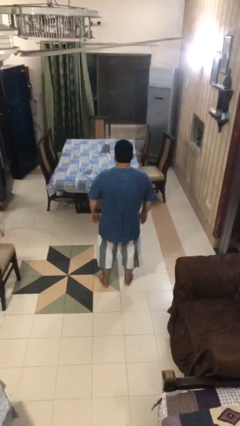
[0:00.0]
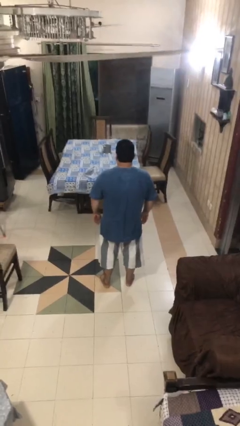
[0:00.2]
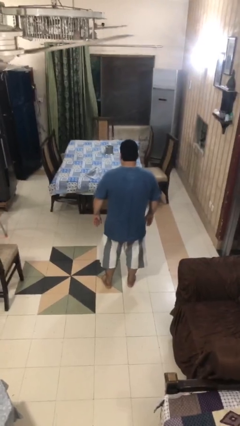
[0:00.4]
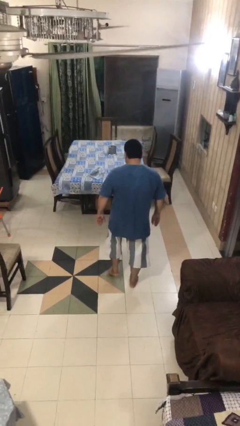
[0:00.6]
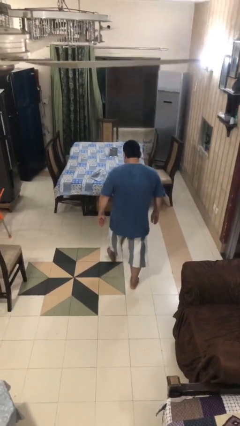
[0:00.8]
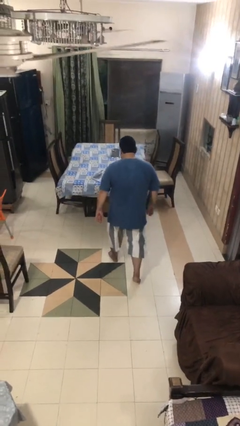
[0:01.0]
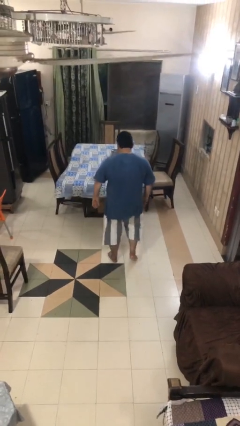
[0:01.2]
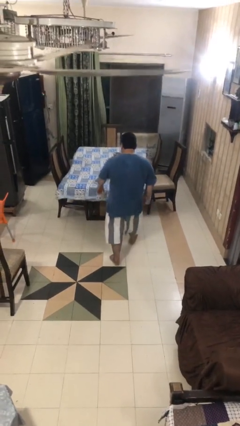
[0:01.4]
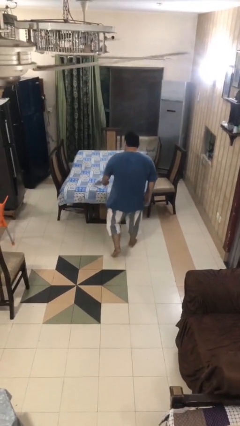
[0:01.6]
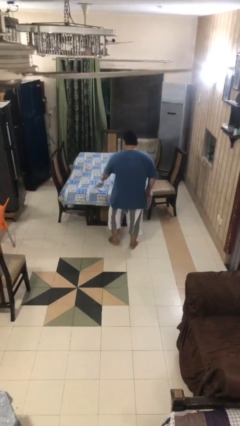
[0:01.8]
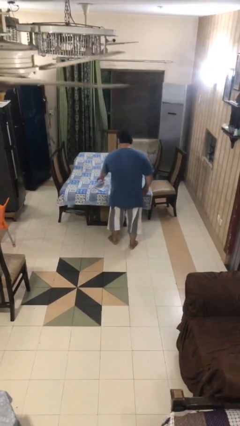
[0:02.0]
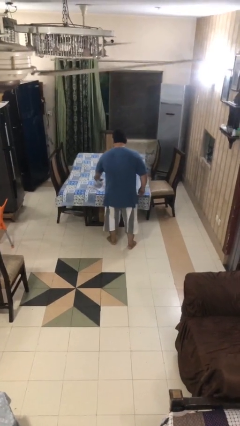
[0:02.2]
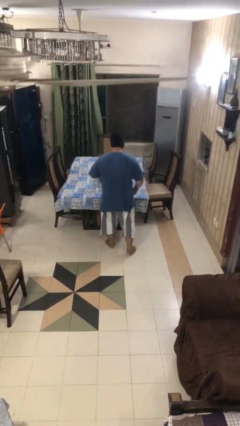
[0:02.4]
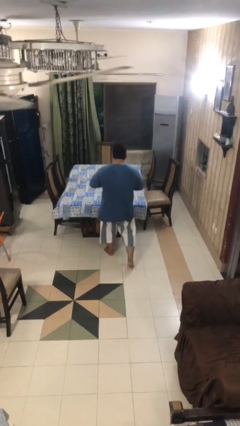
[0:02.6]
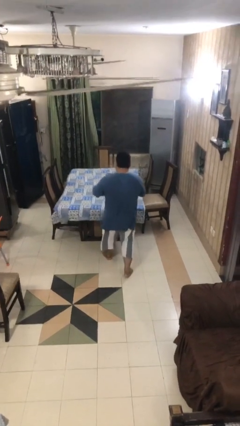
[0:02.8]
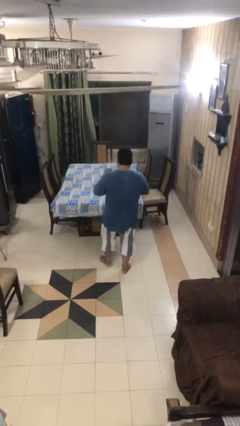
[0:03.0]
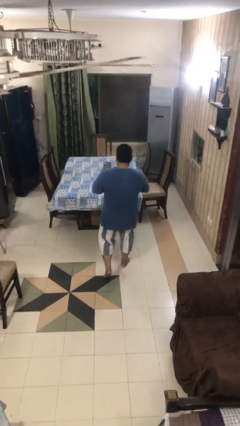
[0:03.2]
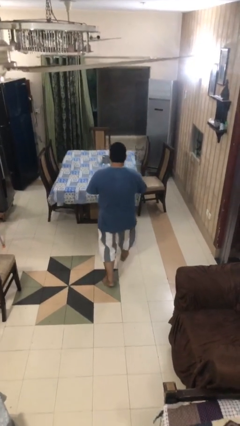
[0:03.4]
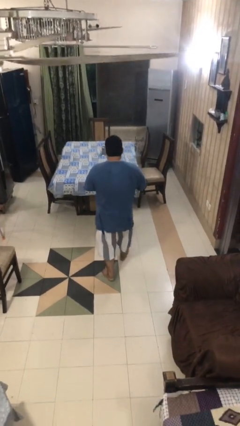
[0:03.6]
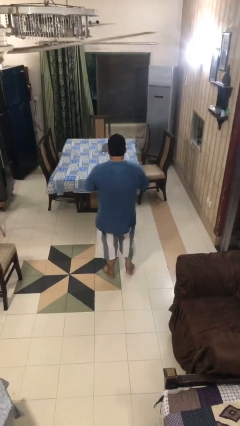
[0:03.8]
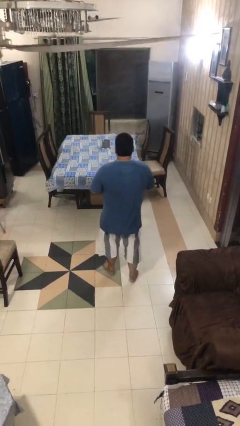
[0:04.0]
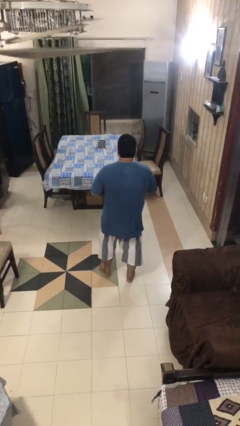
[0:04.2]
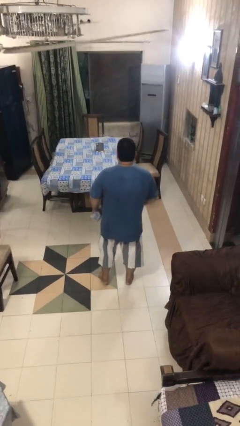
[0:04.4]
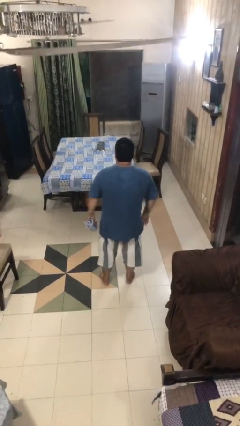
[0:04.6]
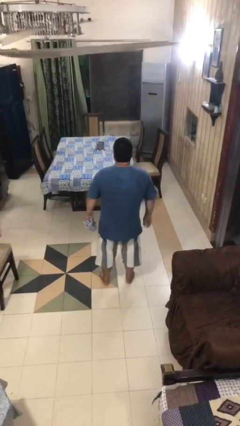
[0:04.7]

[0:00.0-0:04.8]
person picks up object from table

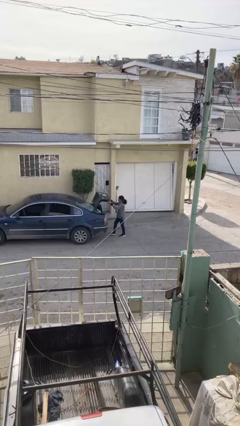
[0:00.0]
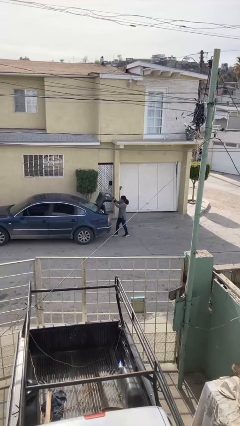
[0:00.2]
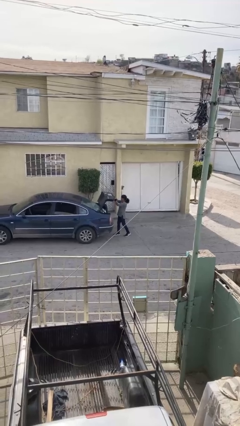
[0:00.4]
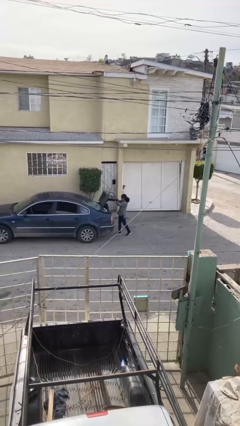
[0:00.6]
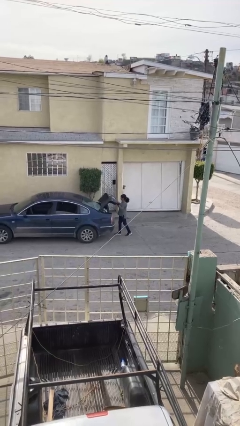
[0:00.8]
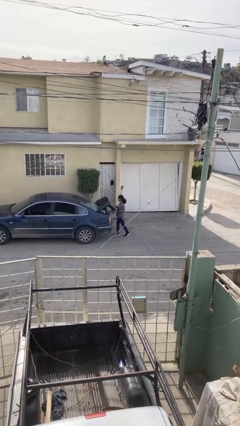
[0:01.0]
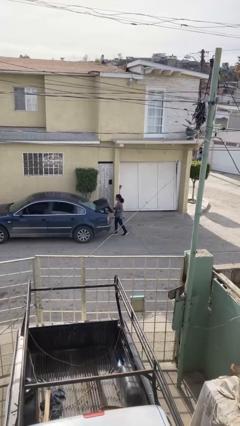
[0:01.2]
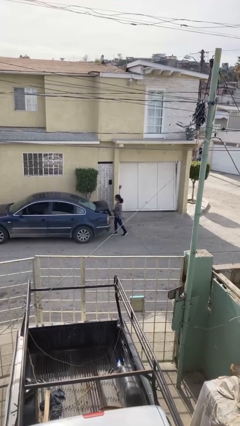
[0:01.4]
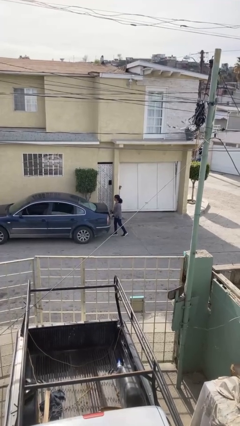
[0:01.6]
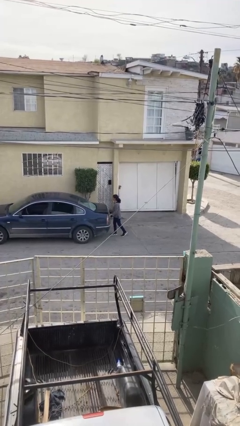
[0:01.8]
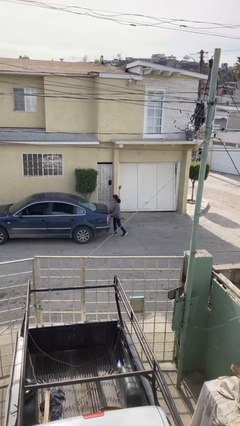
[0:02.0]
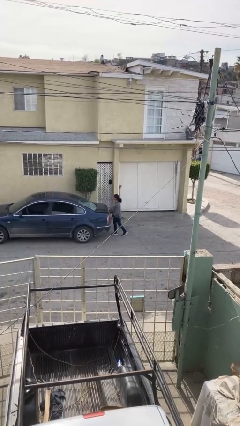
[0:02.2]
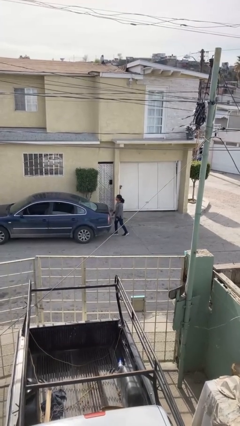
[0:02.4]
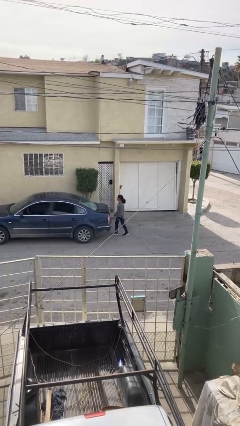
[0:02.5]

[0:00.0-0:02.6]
person closes car trunk

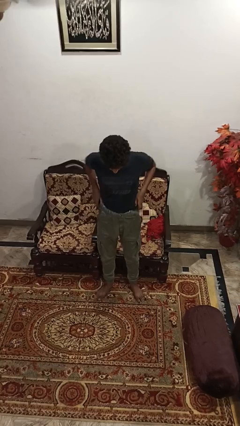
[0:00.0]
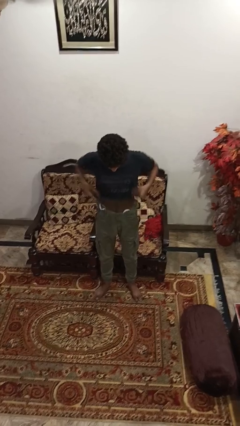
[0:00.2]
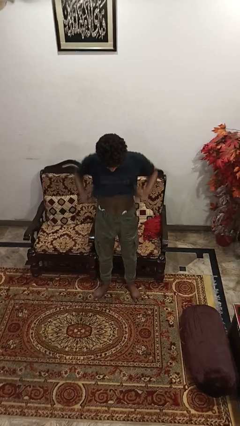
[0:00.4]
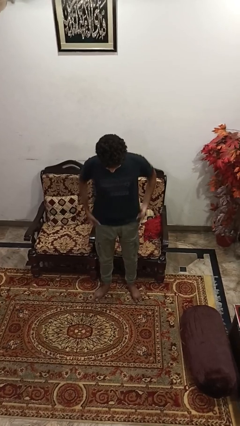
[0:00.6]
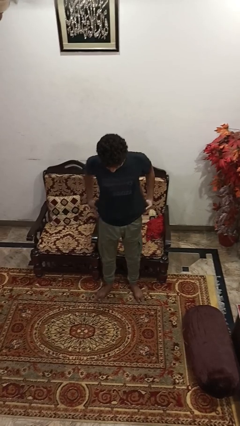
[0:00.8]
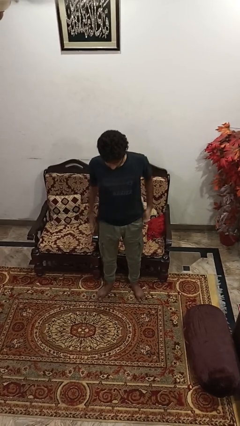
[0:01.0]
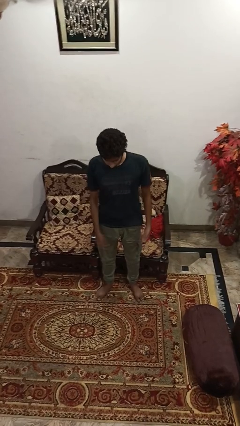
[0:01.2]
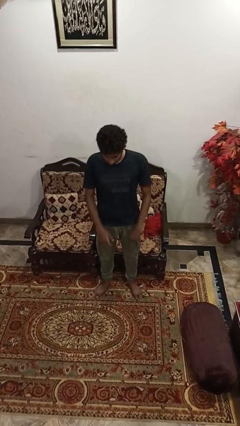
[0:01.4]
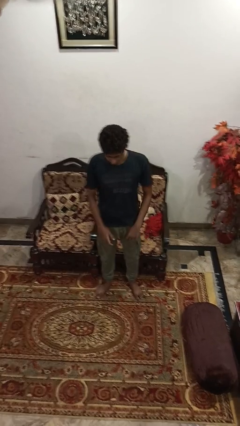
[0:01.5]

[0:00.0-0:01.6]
person untucks shirt

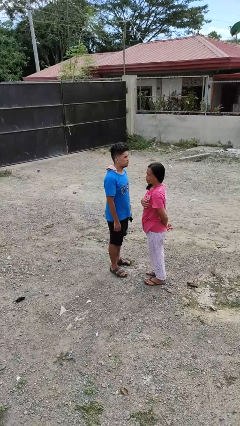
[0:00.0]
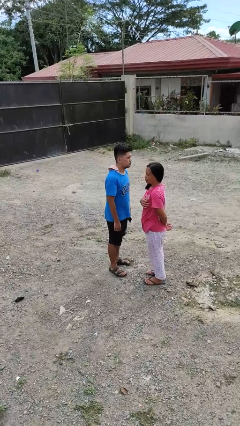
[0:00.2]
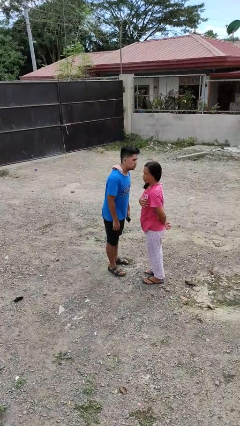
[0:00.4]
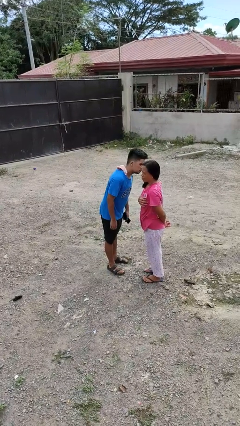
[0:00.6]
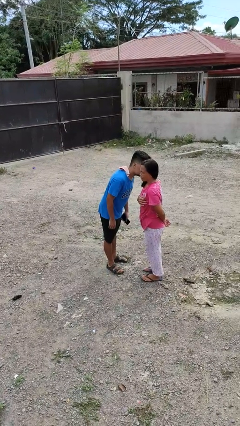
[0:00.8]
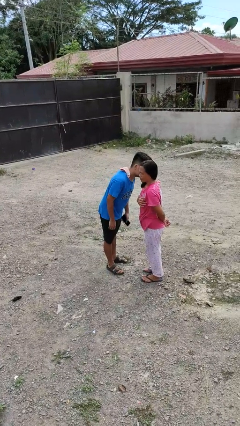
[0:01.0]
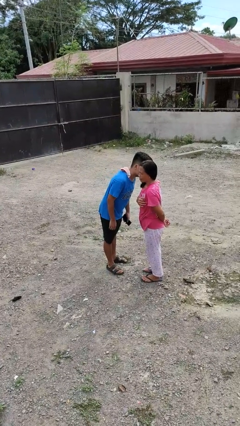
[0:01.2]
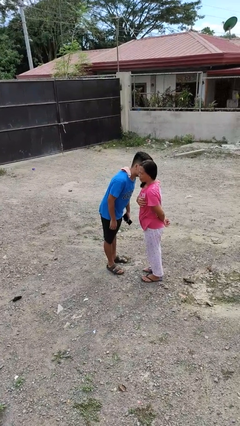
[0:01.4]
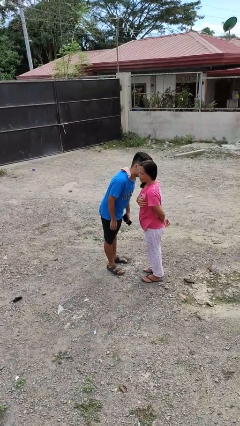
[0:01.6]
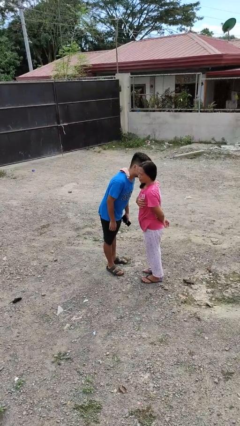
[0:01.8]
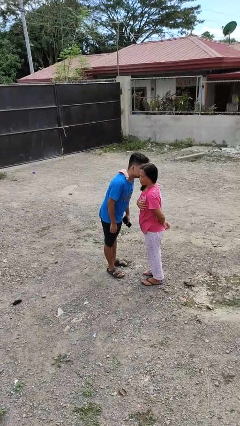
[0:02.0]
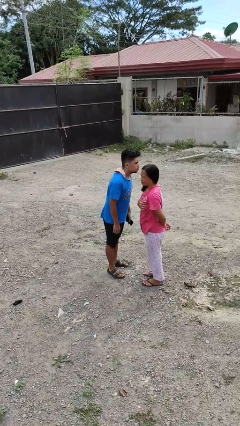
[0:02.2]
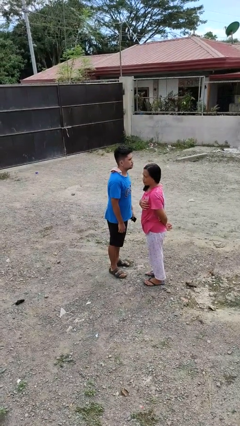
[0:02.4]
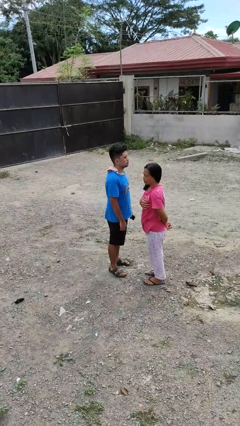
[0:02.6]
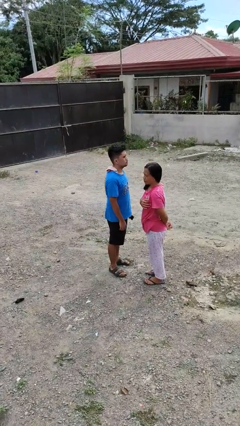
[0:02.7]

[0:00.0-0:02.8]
person kisses cheek of person

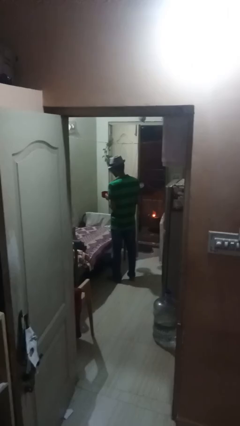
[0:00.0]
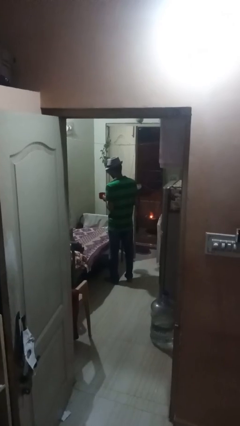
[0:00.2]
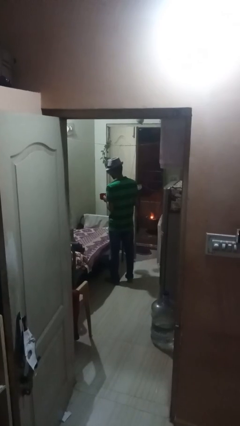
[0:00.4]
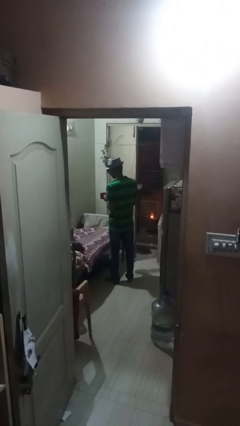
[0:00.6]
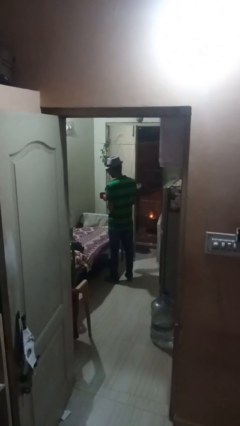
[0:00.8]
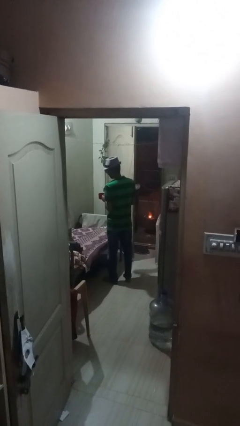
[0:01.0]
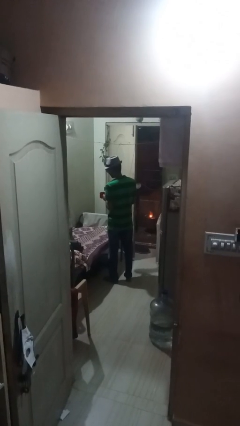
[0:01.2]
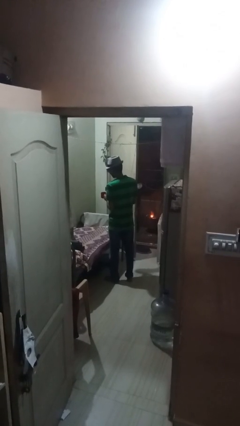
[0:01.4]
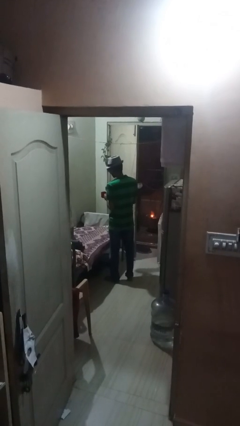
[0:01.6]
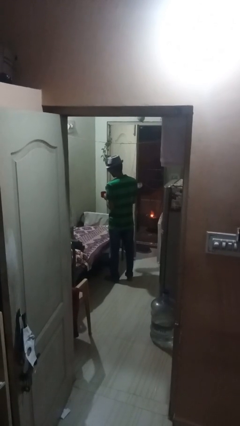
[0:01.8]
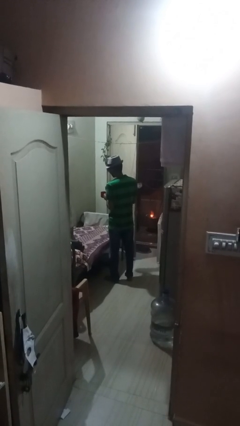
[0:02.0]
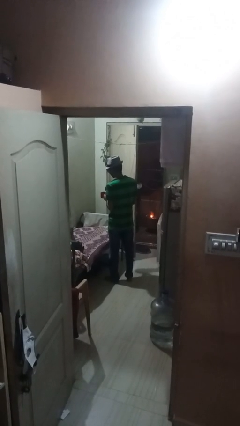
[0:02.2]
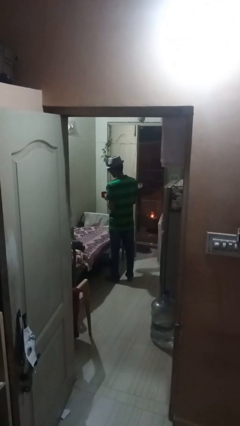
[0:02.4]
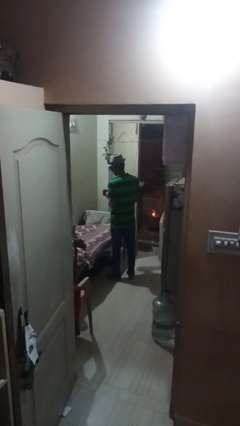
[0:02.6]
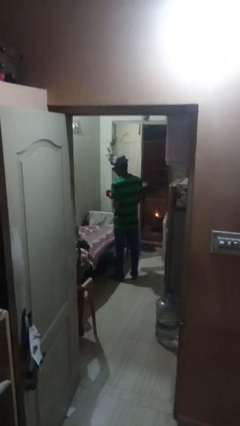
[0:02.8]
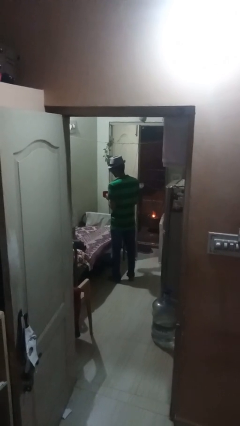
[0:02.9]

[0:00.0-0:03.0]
person pours coffee into mug

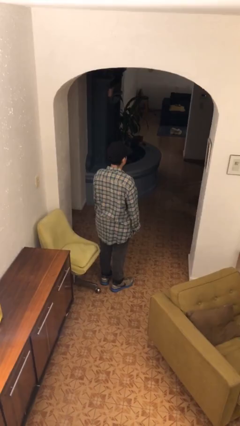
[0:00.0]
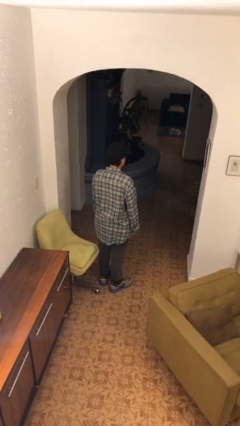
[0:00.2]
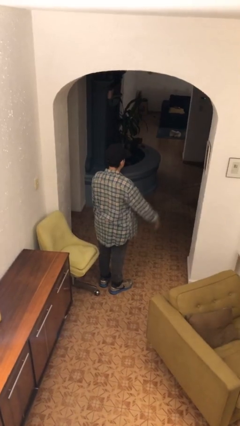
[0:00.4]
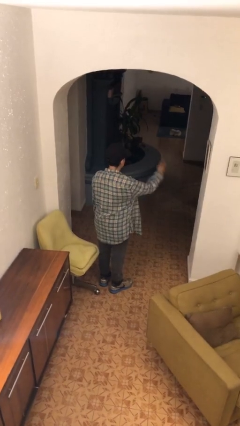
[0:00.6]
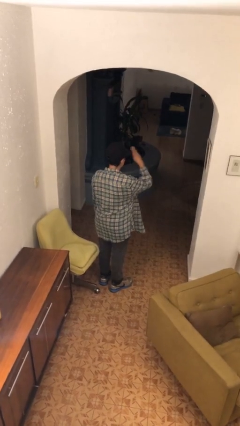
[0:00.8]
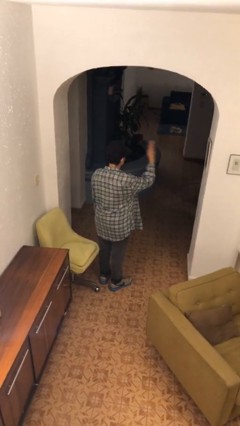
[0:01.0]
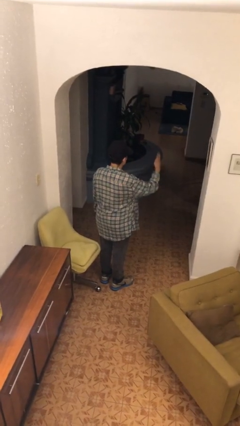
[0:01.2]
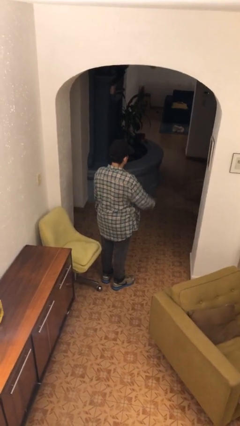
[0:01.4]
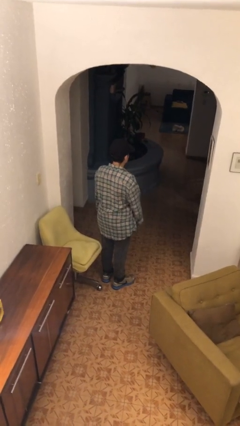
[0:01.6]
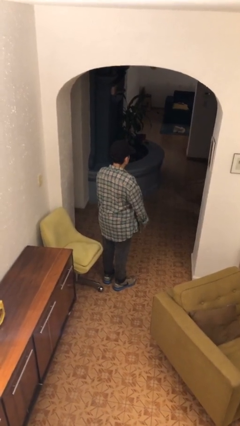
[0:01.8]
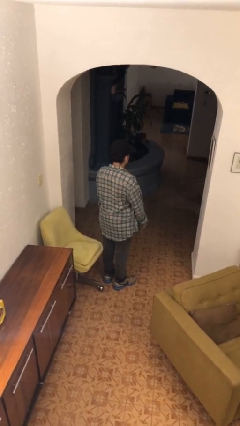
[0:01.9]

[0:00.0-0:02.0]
person salutes

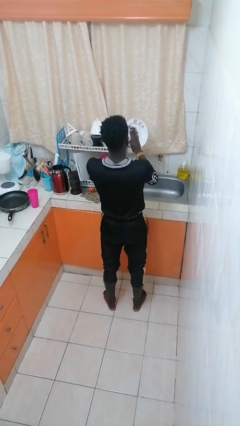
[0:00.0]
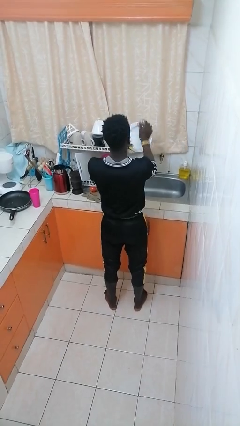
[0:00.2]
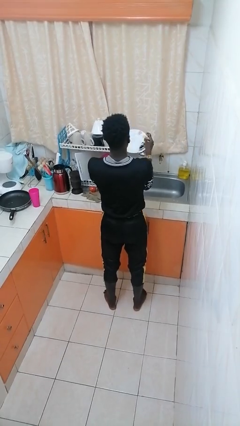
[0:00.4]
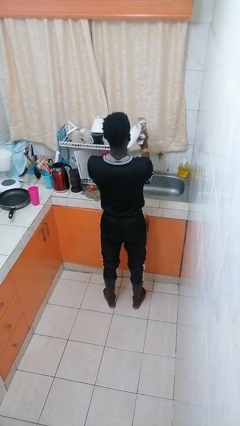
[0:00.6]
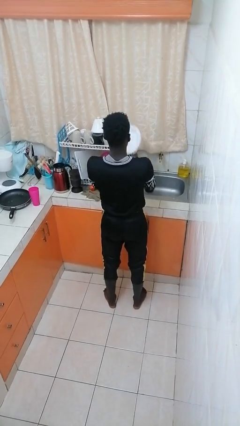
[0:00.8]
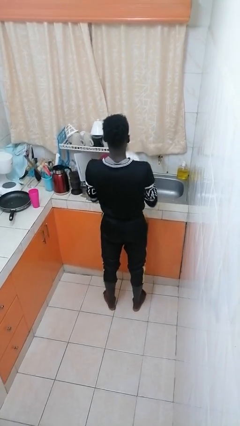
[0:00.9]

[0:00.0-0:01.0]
person dries dish
